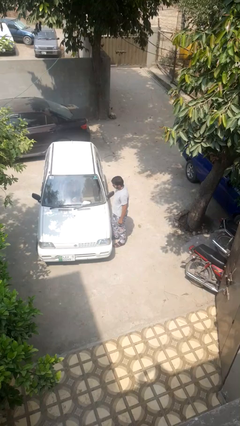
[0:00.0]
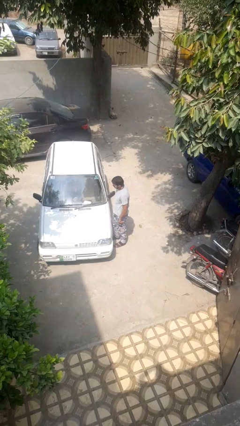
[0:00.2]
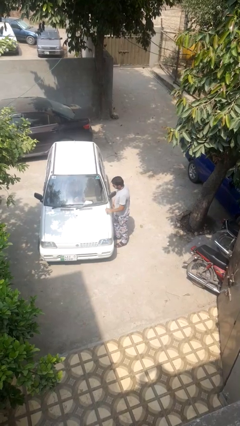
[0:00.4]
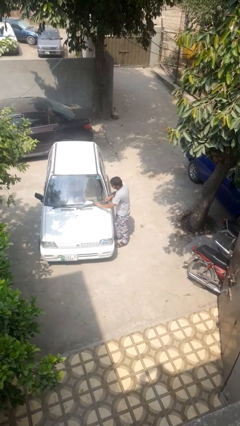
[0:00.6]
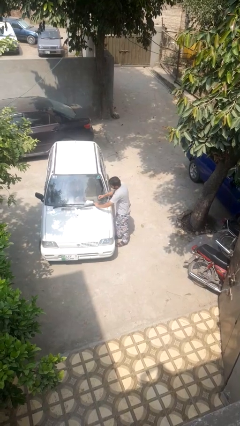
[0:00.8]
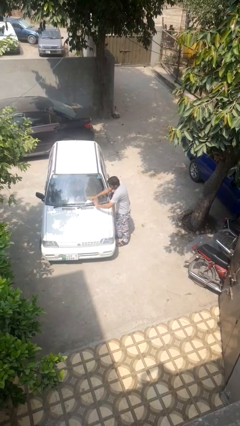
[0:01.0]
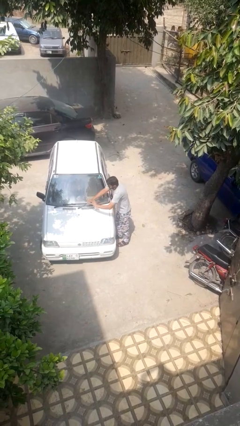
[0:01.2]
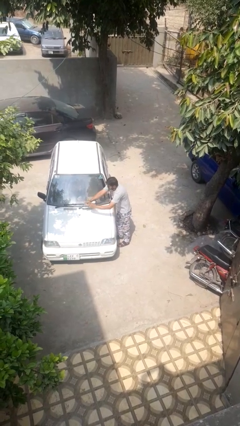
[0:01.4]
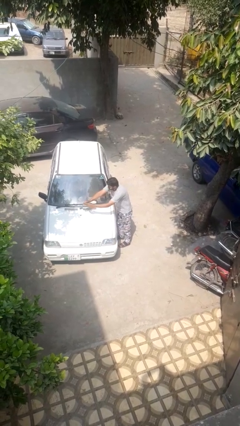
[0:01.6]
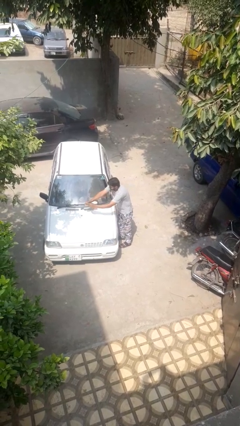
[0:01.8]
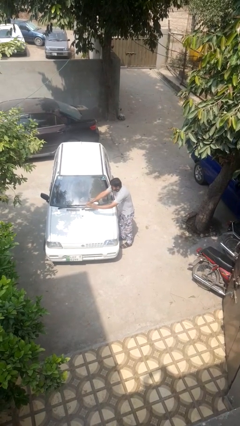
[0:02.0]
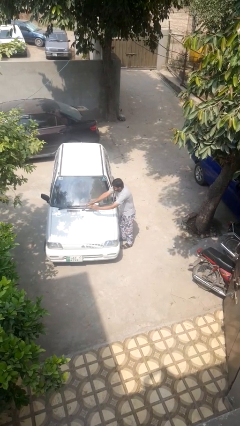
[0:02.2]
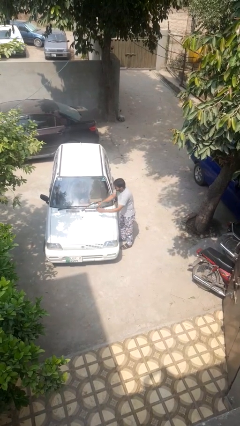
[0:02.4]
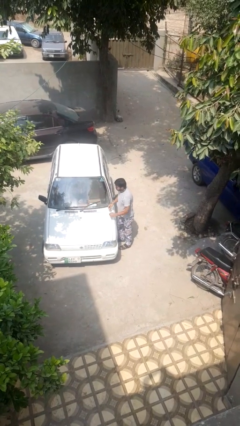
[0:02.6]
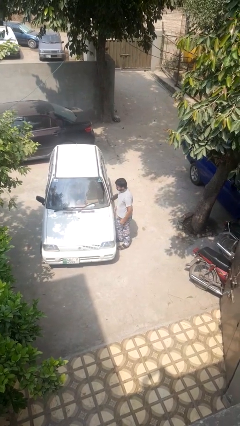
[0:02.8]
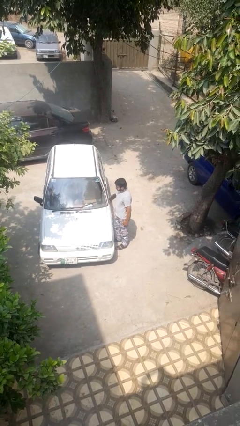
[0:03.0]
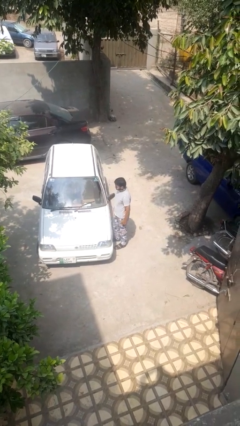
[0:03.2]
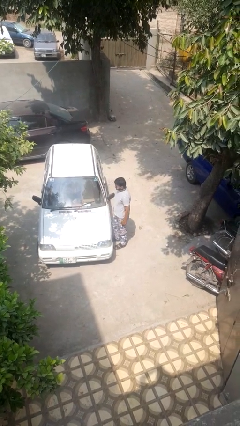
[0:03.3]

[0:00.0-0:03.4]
person flips up car wipers

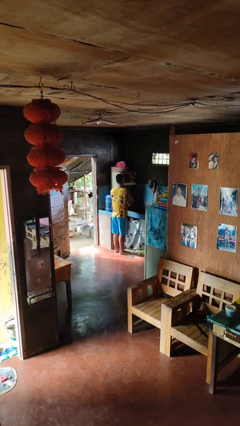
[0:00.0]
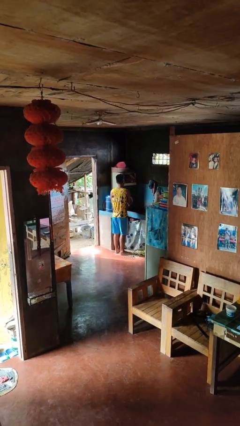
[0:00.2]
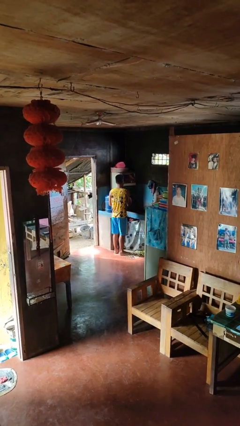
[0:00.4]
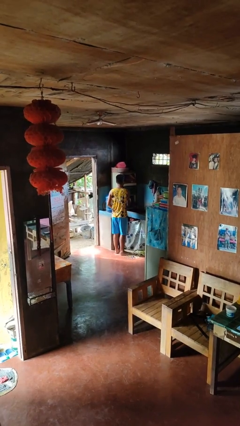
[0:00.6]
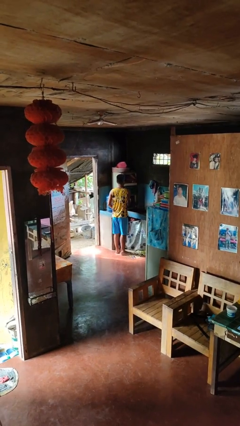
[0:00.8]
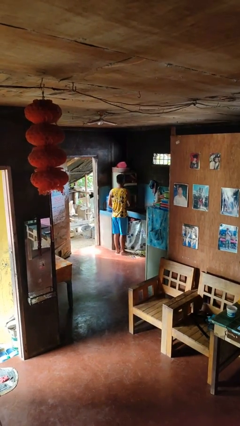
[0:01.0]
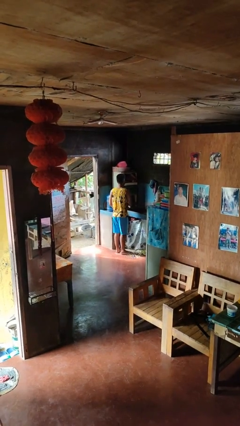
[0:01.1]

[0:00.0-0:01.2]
person closes dishwasher

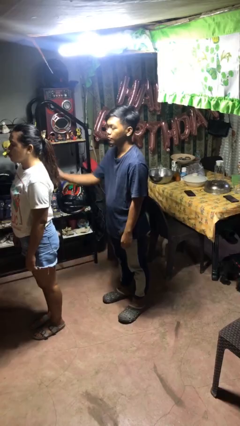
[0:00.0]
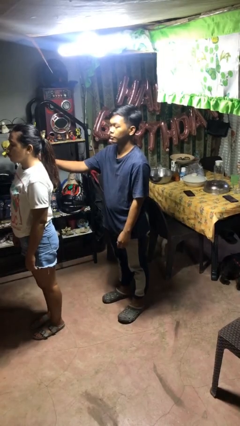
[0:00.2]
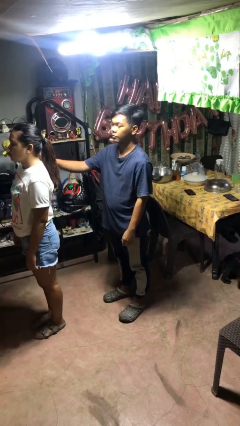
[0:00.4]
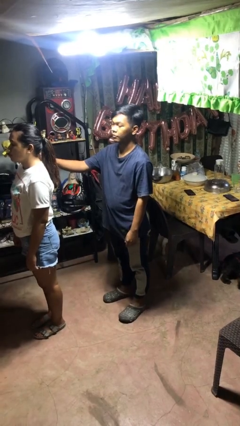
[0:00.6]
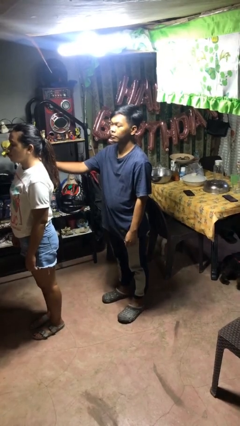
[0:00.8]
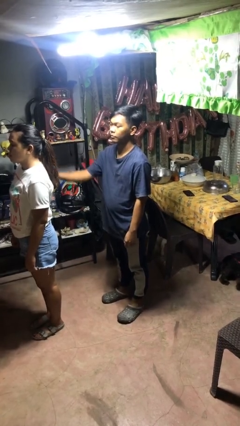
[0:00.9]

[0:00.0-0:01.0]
person pounds shoulders of person

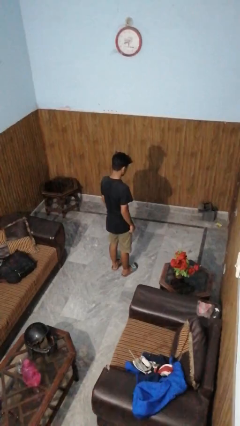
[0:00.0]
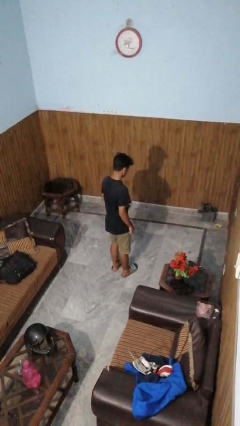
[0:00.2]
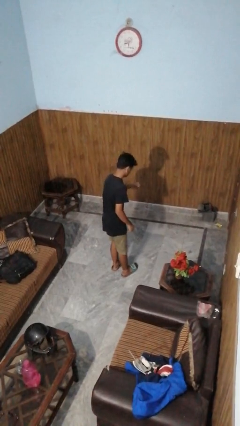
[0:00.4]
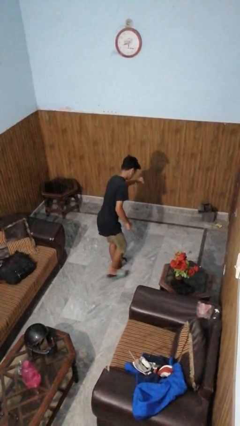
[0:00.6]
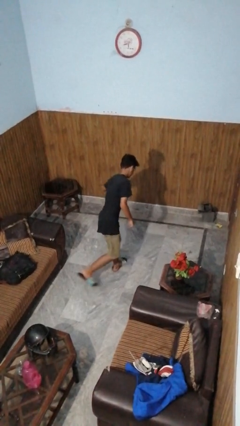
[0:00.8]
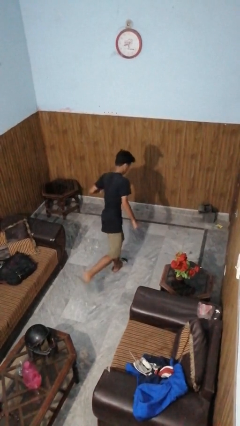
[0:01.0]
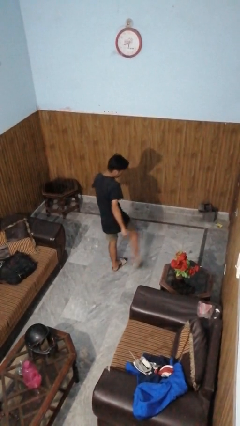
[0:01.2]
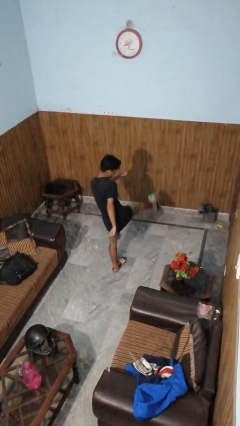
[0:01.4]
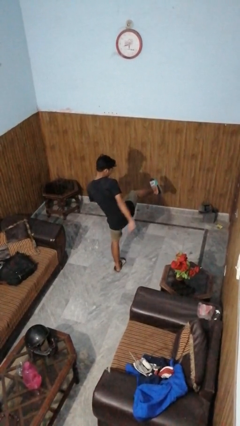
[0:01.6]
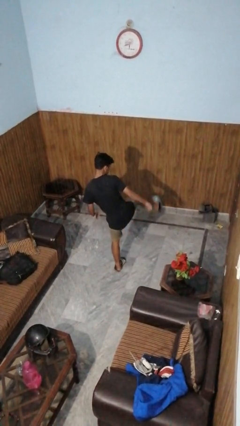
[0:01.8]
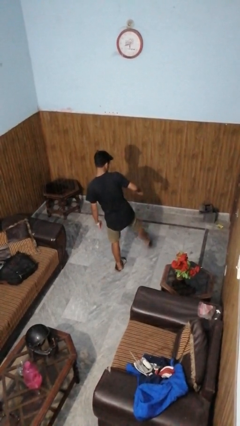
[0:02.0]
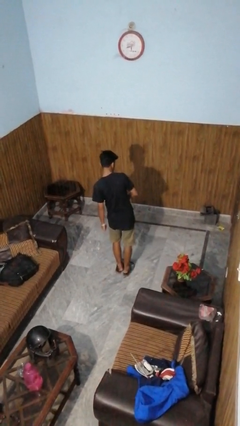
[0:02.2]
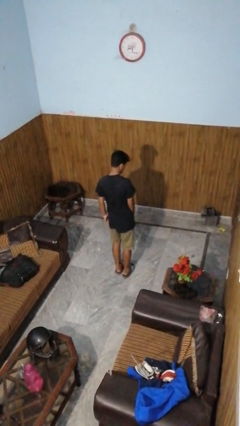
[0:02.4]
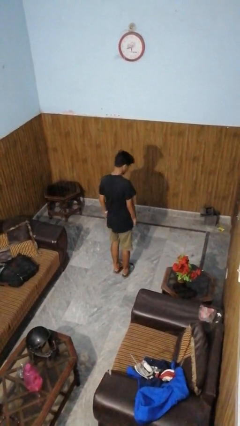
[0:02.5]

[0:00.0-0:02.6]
person karate kicks

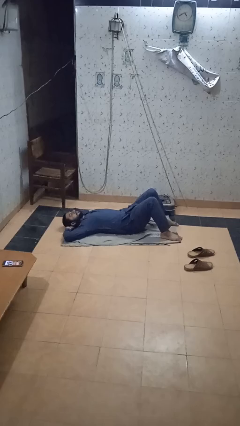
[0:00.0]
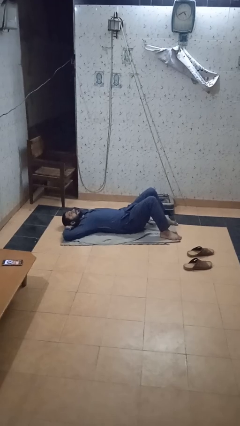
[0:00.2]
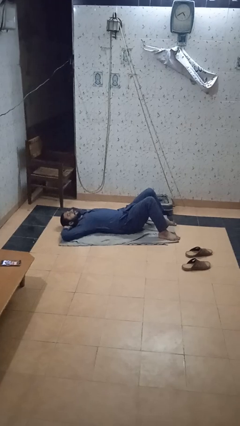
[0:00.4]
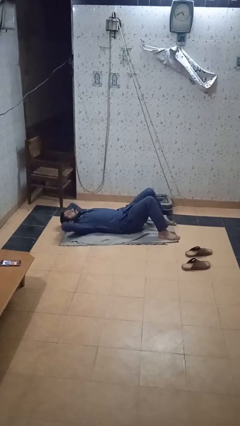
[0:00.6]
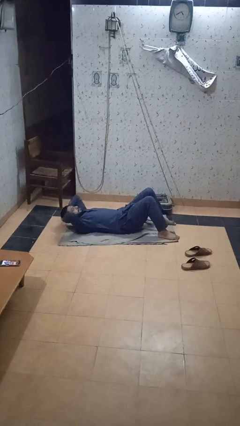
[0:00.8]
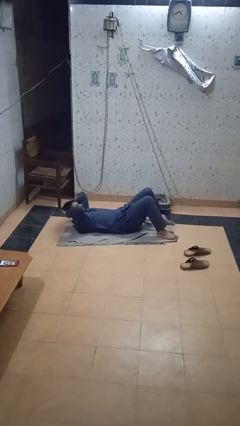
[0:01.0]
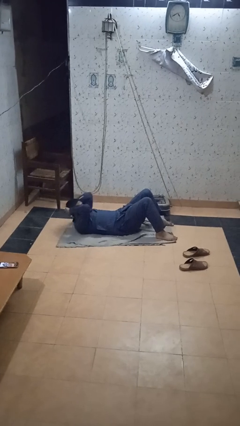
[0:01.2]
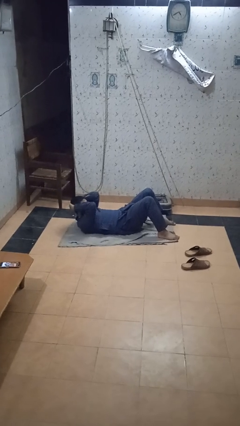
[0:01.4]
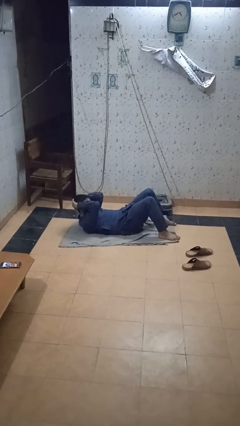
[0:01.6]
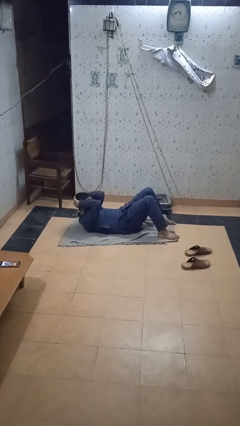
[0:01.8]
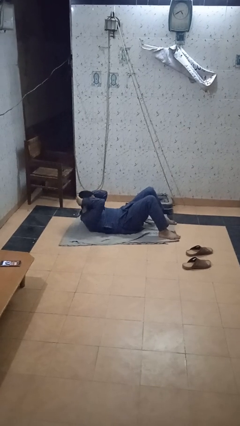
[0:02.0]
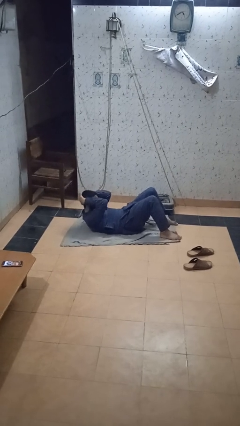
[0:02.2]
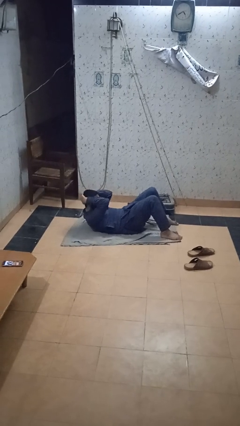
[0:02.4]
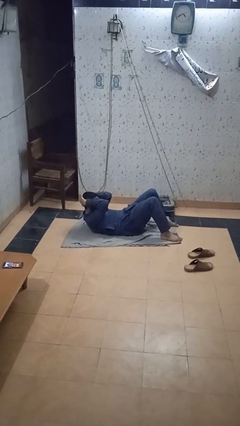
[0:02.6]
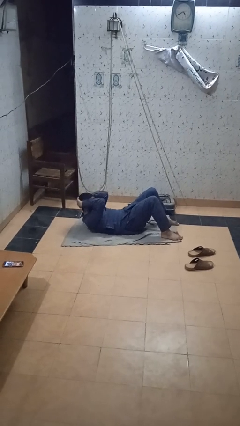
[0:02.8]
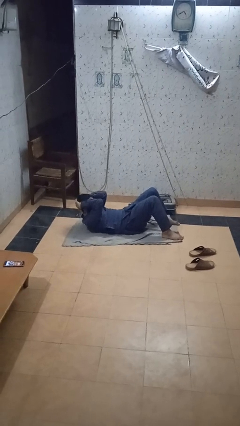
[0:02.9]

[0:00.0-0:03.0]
person exercises with situp

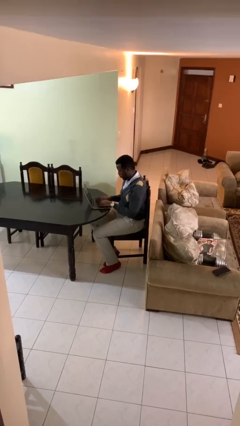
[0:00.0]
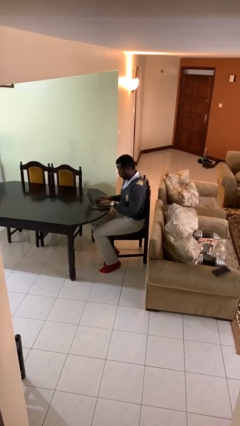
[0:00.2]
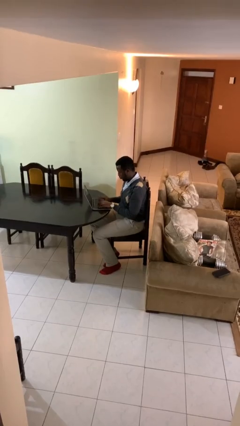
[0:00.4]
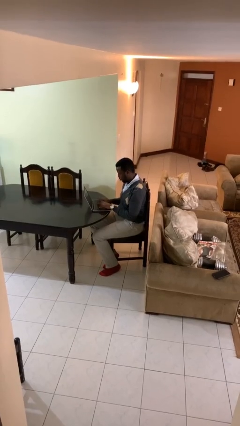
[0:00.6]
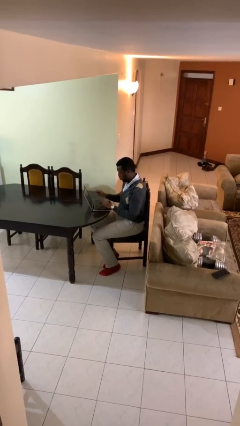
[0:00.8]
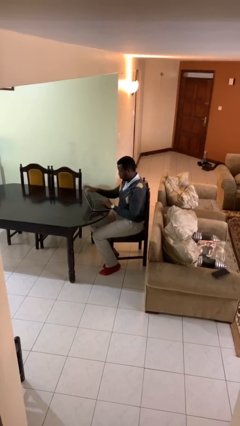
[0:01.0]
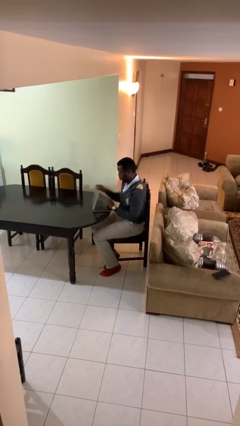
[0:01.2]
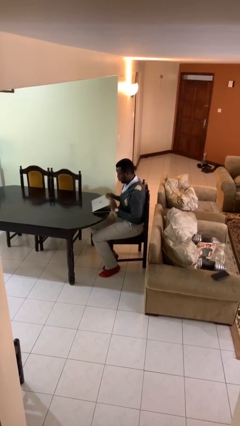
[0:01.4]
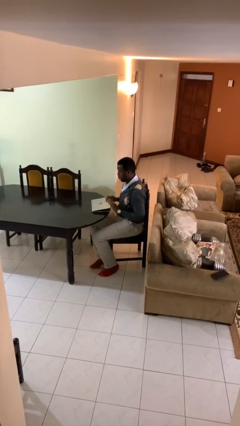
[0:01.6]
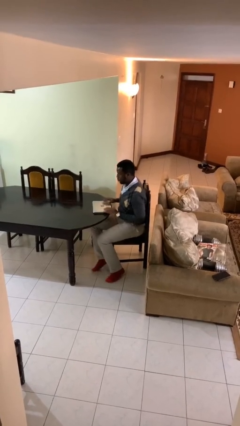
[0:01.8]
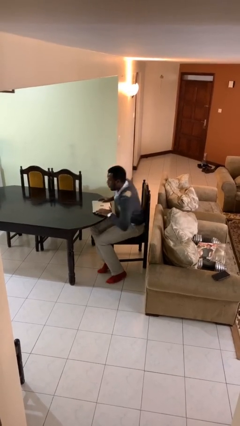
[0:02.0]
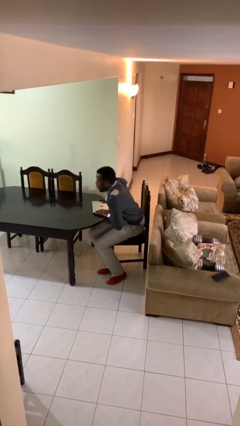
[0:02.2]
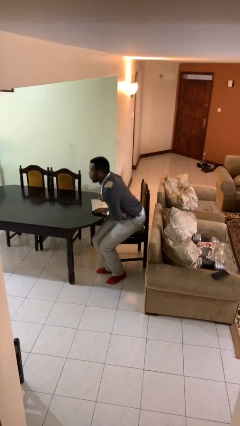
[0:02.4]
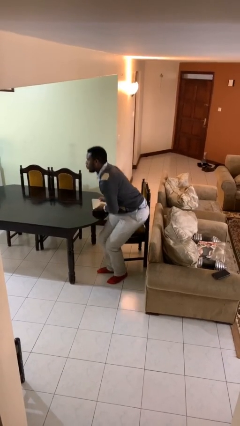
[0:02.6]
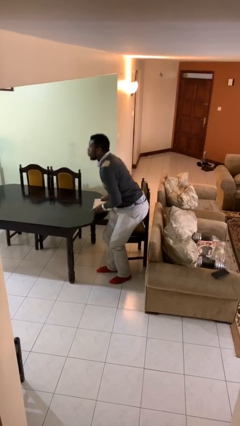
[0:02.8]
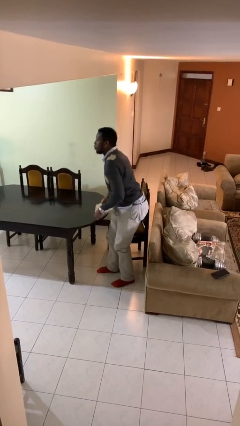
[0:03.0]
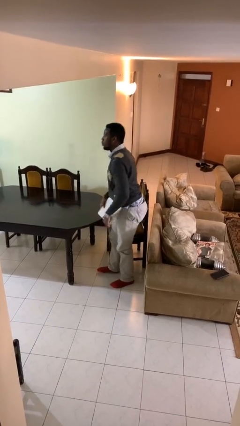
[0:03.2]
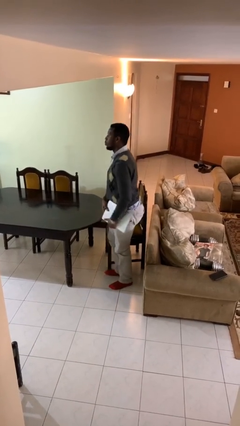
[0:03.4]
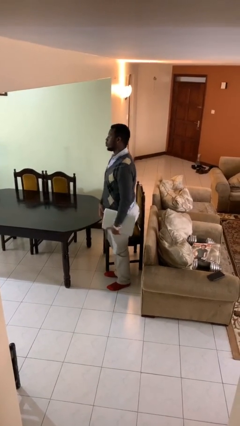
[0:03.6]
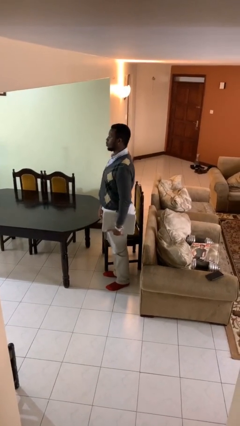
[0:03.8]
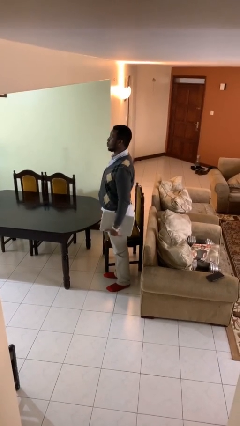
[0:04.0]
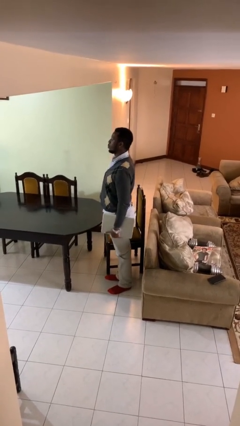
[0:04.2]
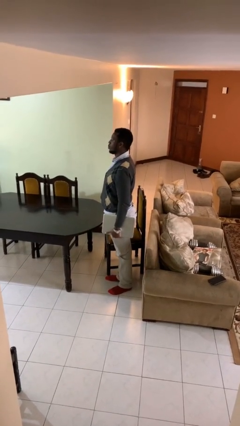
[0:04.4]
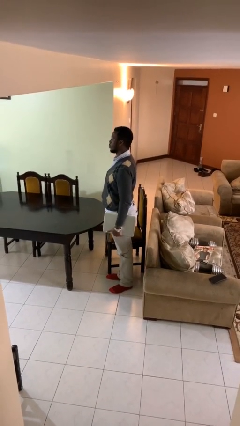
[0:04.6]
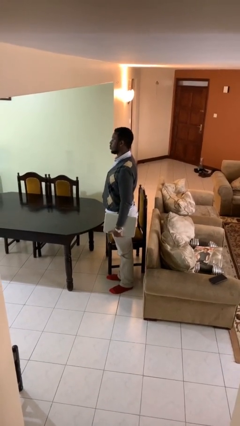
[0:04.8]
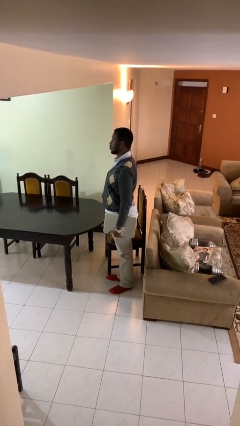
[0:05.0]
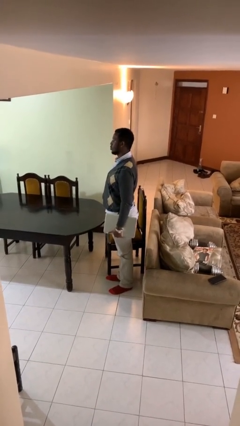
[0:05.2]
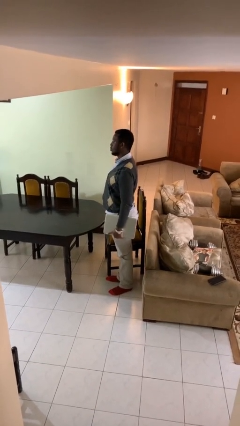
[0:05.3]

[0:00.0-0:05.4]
person stands up

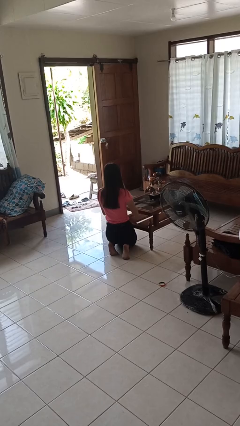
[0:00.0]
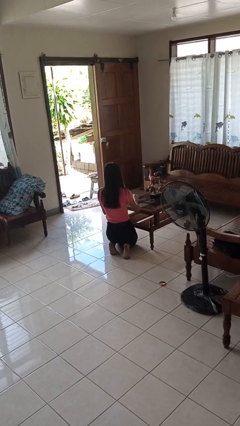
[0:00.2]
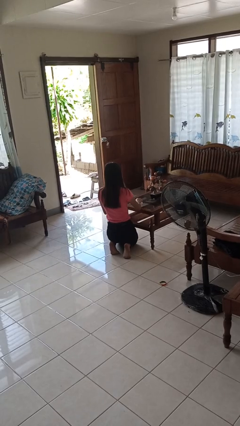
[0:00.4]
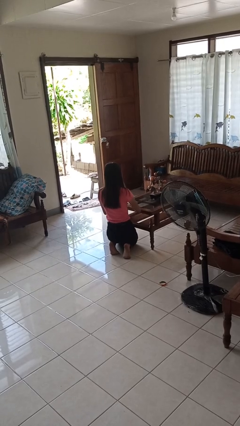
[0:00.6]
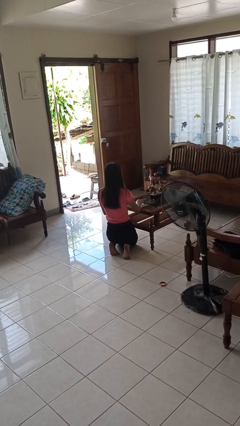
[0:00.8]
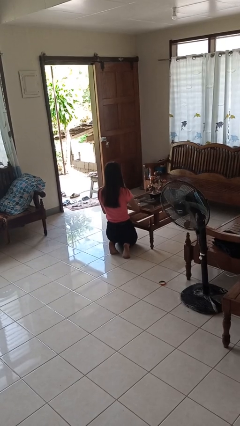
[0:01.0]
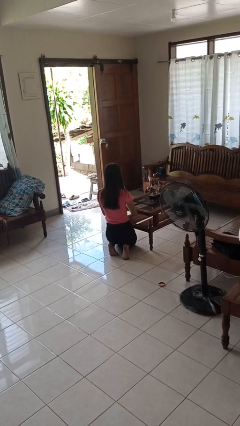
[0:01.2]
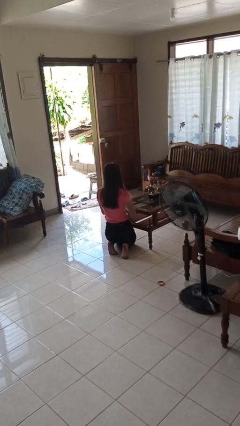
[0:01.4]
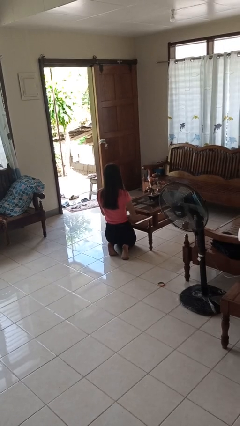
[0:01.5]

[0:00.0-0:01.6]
person cleans table with rag
